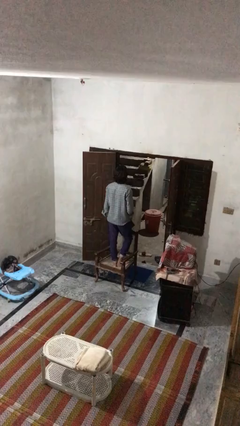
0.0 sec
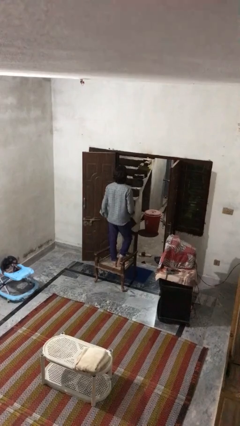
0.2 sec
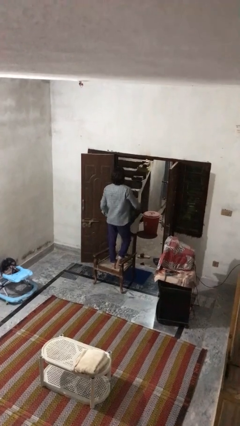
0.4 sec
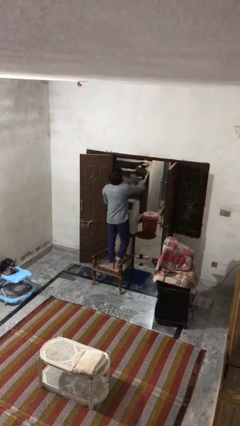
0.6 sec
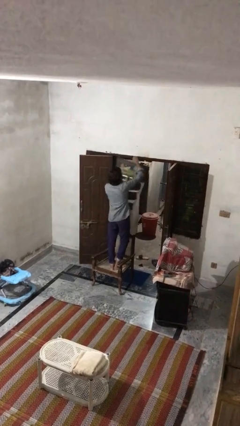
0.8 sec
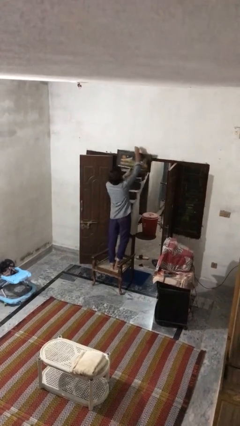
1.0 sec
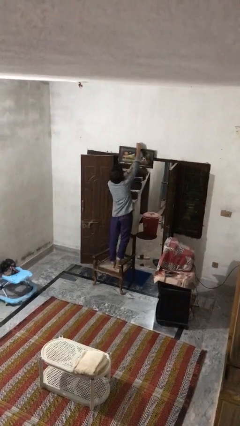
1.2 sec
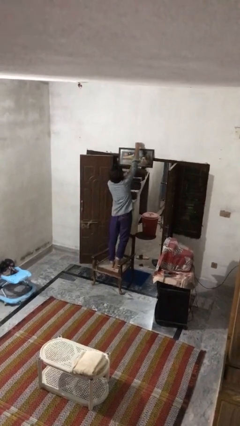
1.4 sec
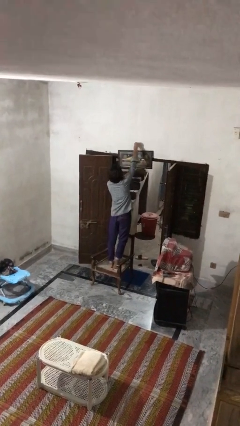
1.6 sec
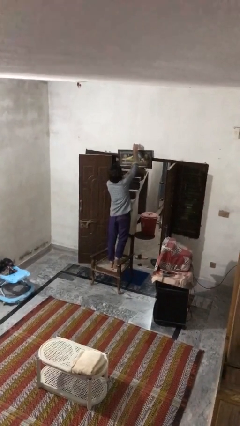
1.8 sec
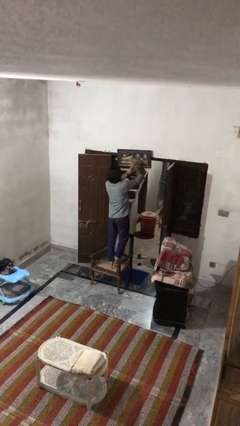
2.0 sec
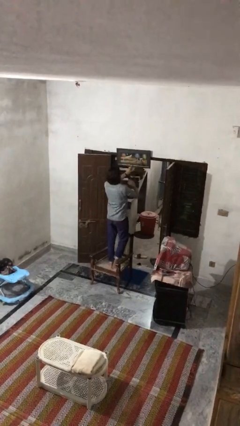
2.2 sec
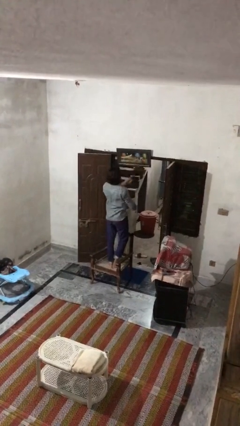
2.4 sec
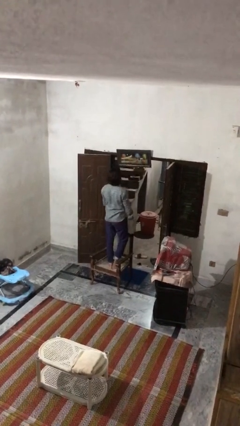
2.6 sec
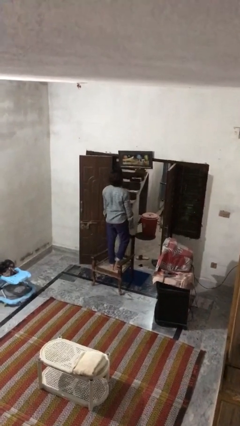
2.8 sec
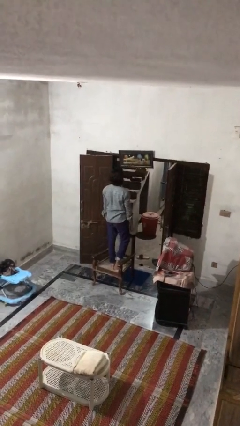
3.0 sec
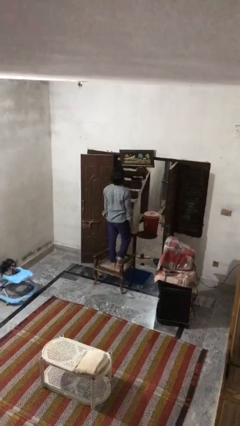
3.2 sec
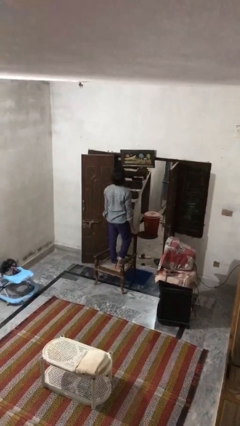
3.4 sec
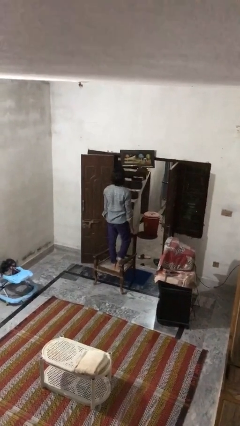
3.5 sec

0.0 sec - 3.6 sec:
person puts up picture frame

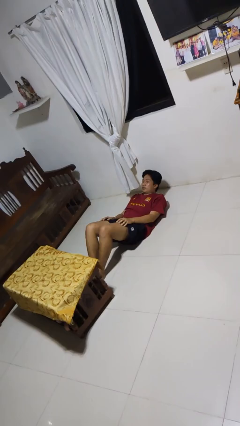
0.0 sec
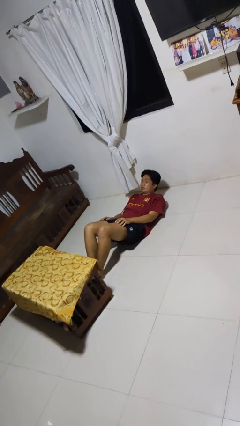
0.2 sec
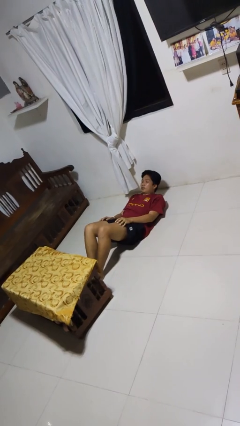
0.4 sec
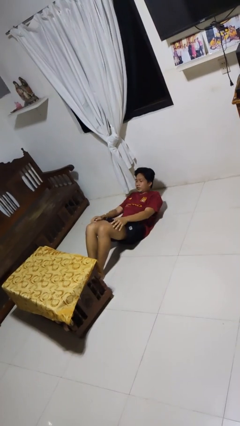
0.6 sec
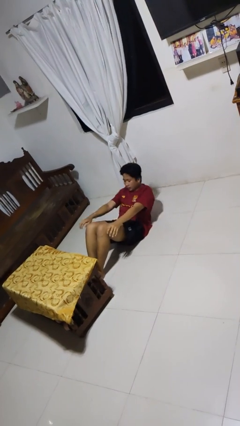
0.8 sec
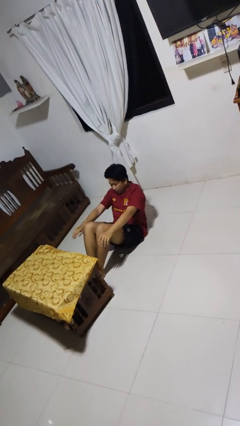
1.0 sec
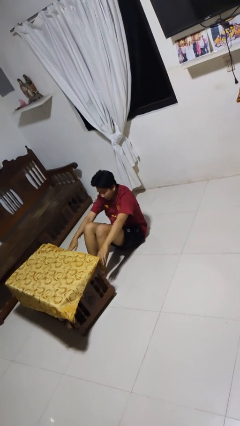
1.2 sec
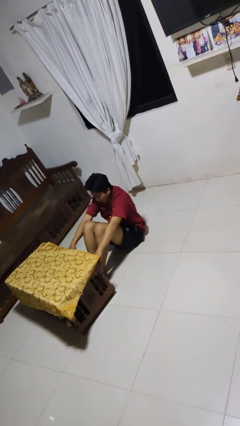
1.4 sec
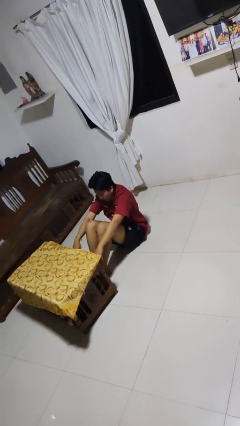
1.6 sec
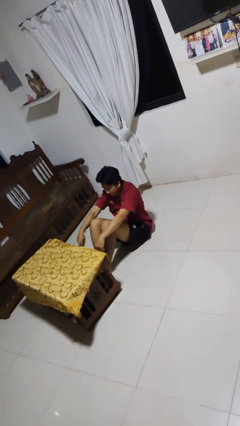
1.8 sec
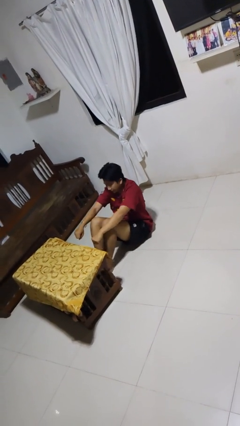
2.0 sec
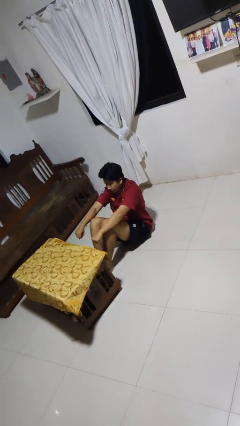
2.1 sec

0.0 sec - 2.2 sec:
person exercises with situp

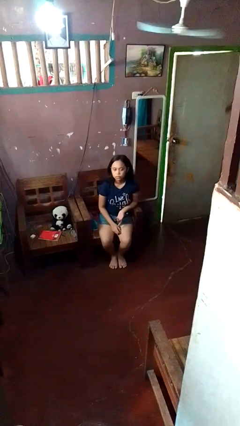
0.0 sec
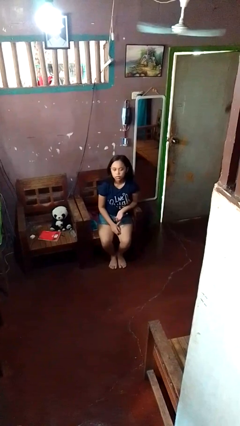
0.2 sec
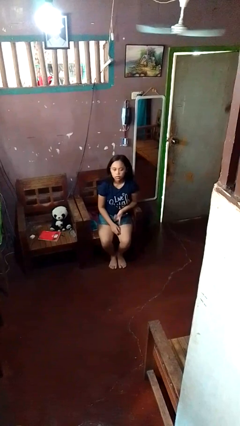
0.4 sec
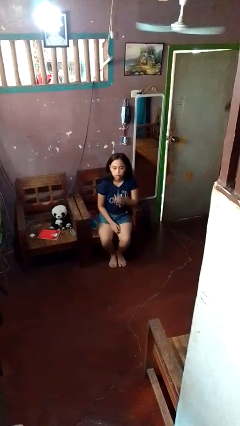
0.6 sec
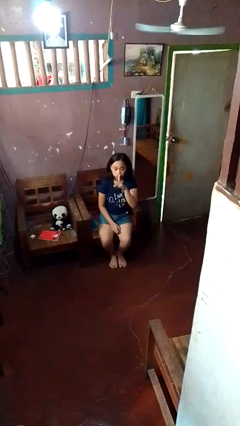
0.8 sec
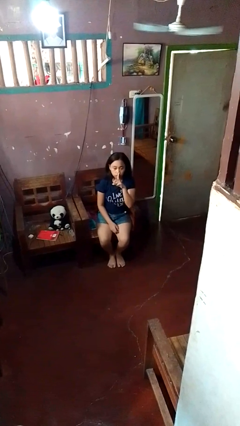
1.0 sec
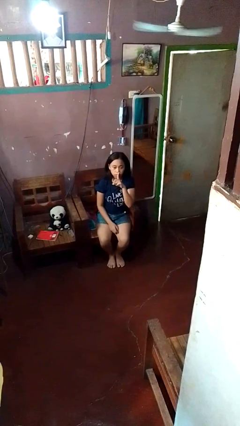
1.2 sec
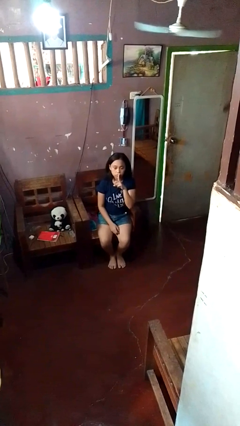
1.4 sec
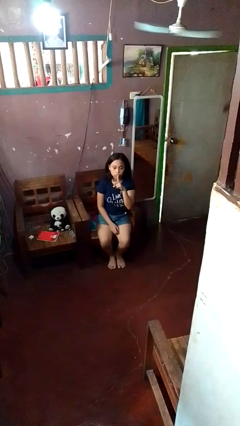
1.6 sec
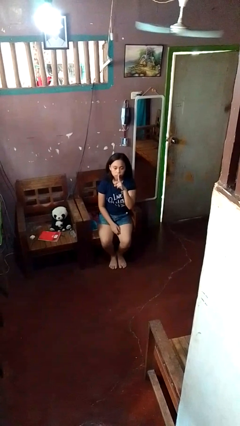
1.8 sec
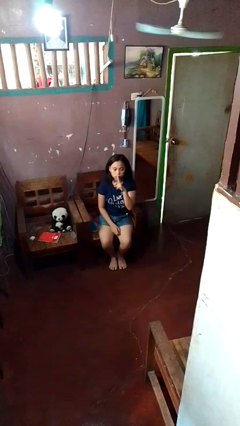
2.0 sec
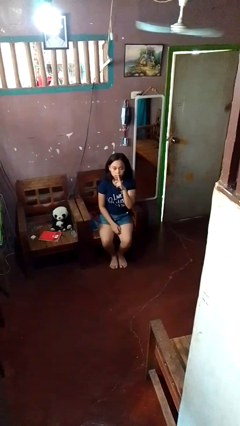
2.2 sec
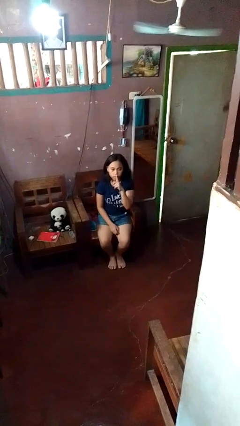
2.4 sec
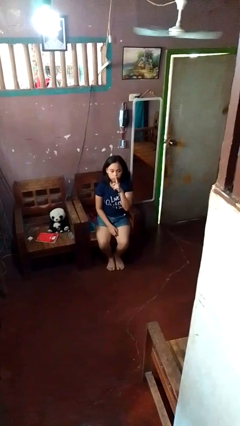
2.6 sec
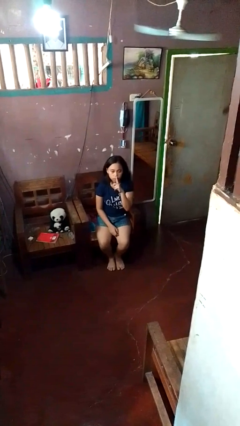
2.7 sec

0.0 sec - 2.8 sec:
person gestures be quiet

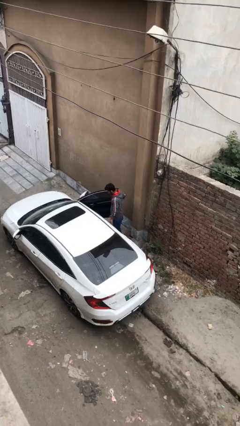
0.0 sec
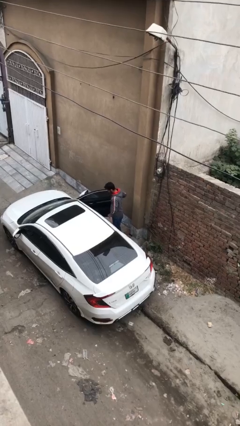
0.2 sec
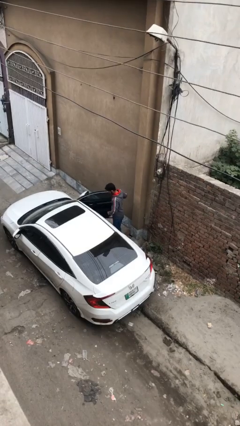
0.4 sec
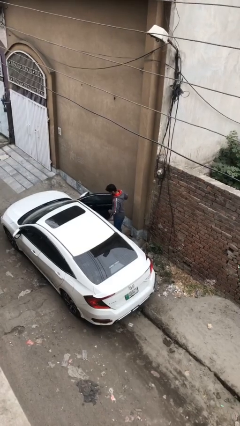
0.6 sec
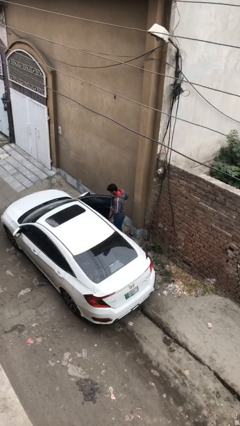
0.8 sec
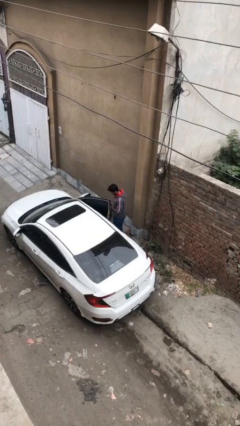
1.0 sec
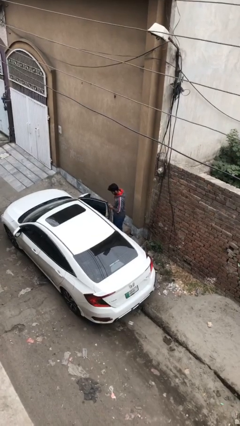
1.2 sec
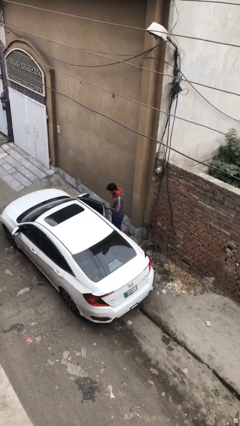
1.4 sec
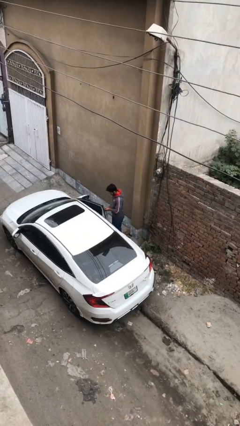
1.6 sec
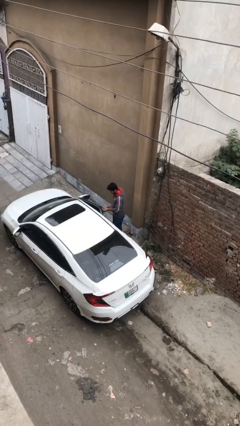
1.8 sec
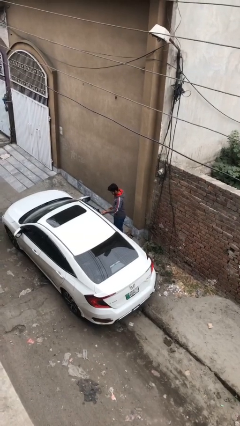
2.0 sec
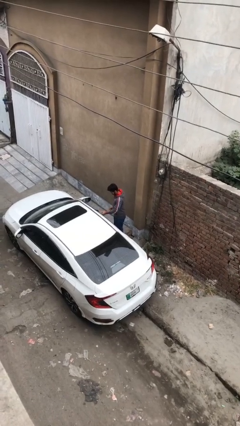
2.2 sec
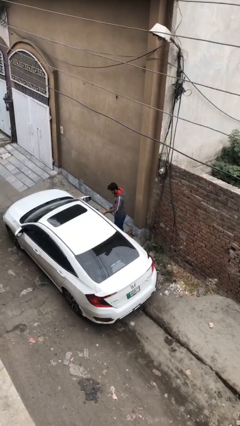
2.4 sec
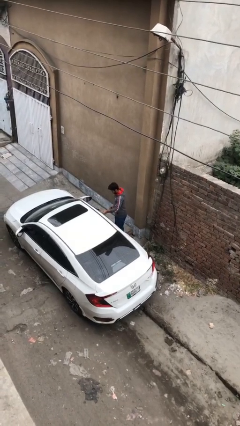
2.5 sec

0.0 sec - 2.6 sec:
person closes car door

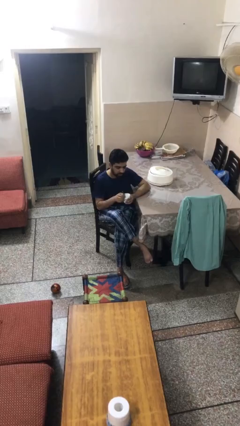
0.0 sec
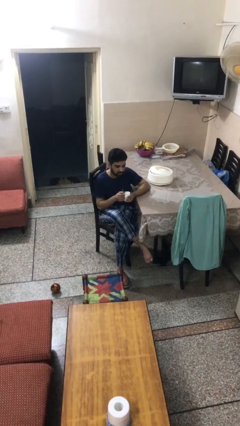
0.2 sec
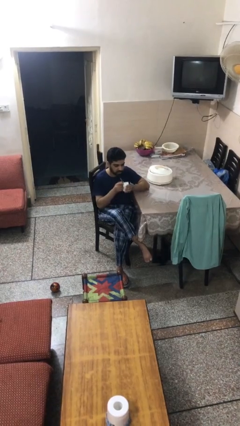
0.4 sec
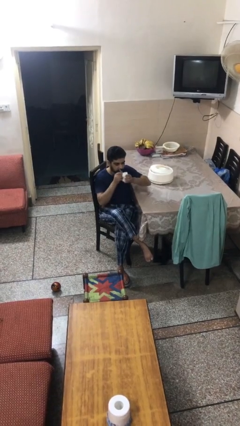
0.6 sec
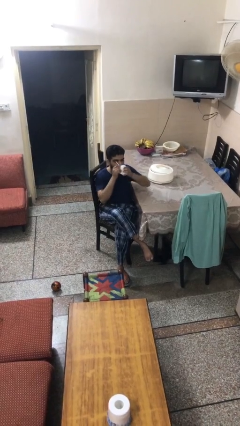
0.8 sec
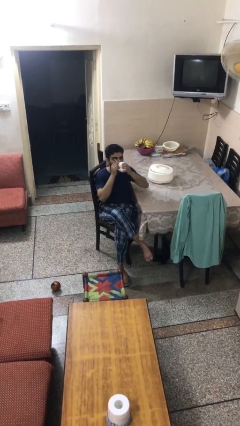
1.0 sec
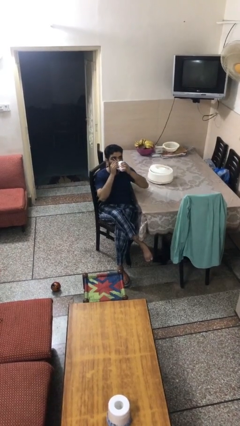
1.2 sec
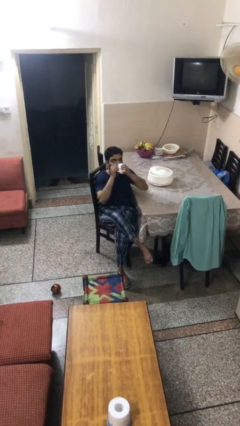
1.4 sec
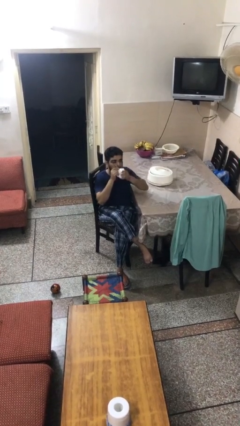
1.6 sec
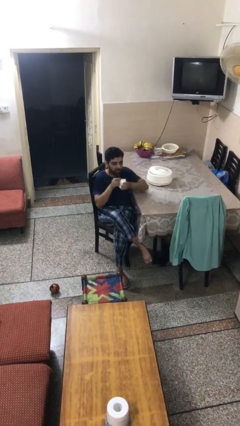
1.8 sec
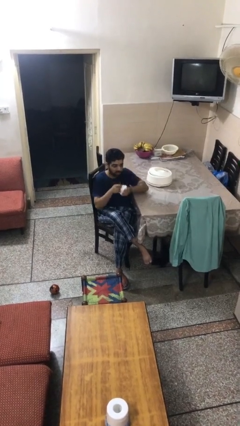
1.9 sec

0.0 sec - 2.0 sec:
person drinks from mug

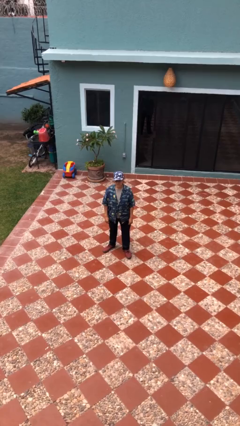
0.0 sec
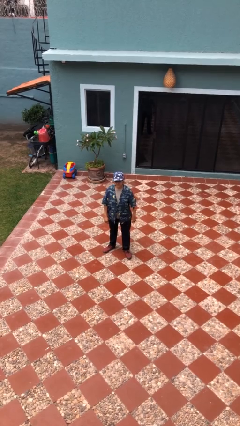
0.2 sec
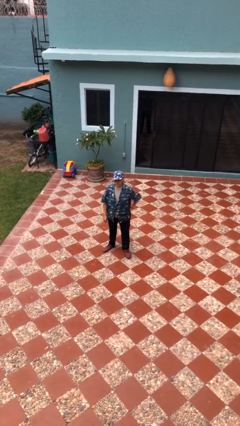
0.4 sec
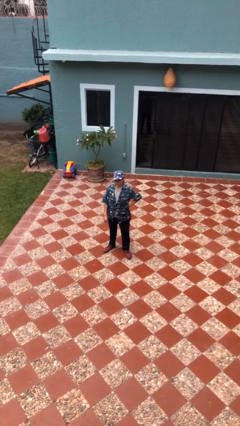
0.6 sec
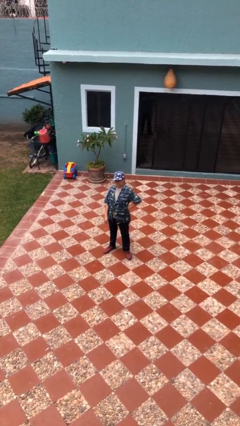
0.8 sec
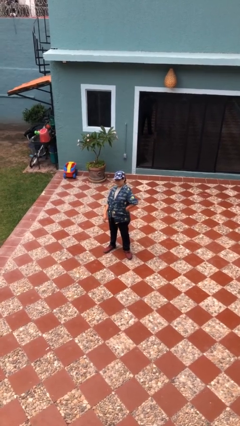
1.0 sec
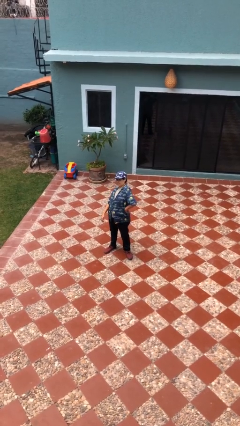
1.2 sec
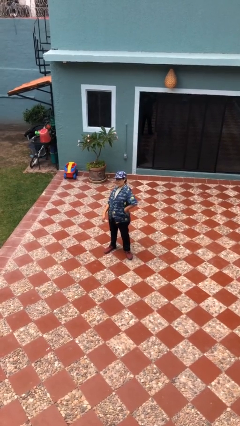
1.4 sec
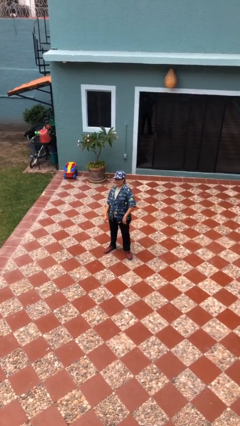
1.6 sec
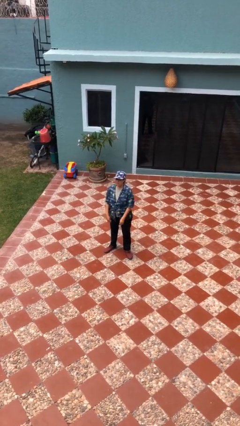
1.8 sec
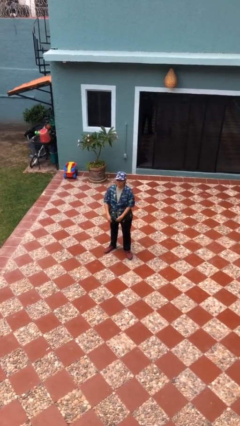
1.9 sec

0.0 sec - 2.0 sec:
person stretches back

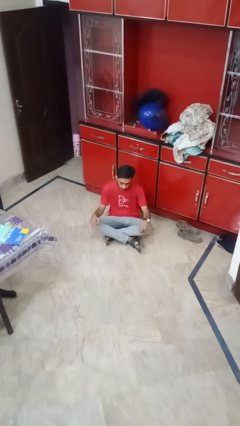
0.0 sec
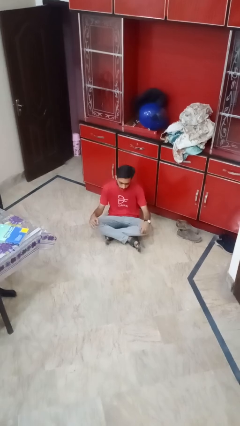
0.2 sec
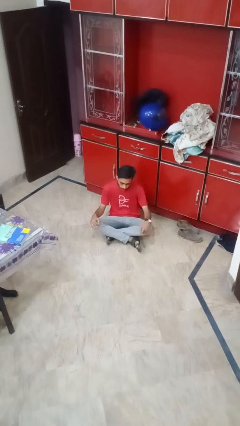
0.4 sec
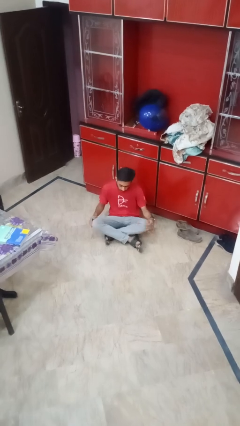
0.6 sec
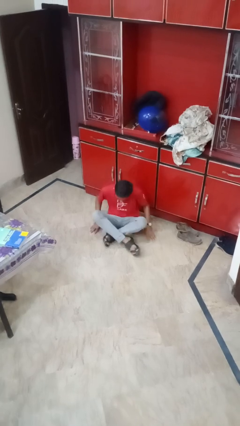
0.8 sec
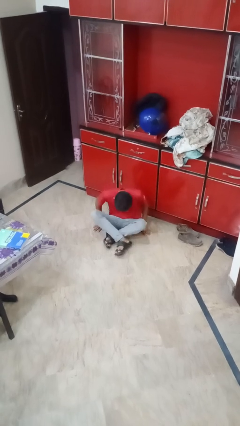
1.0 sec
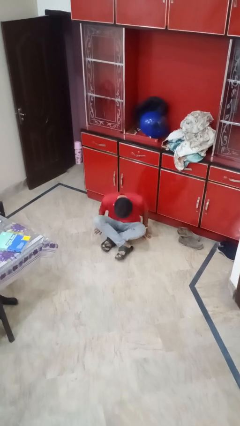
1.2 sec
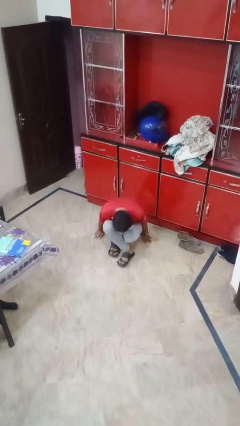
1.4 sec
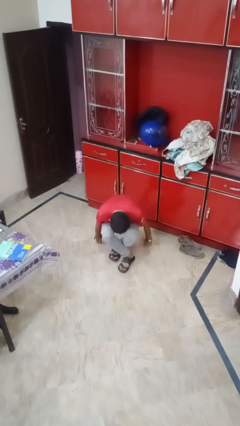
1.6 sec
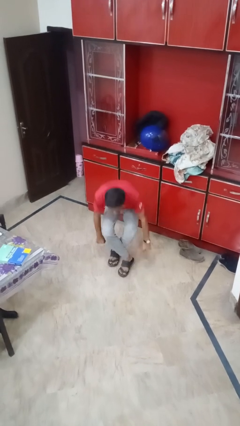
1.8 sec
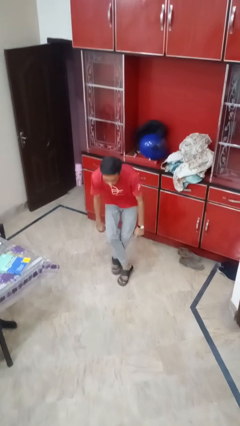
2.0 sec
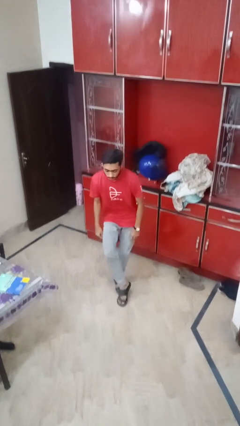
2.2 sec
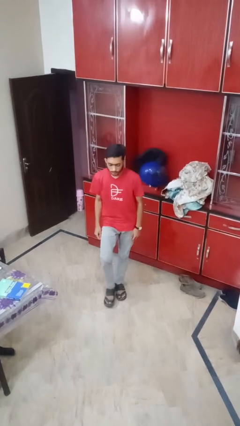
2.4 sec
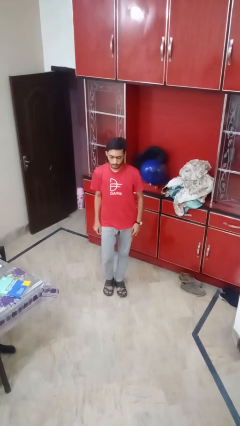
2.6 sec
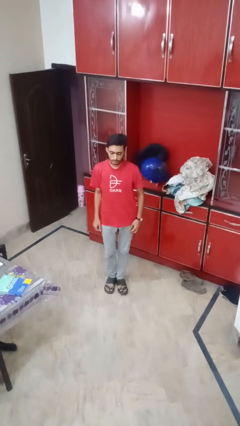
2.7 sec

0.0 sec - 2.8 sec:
person stands up from floor
